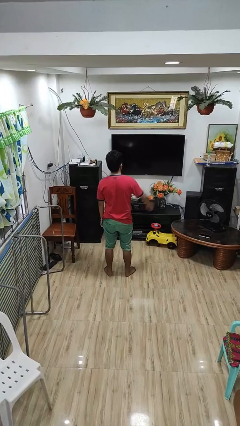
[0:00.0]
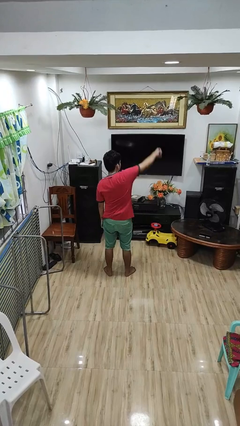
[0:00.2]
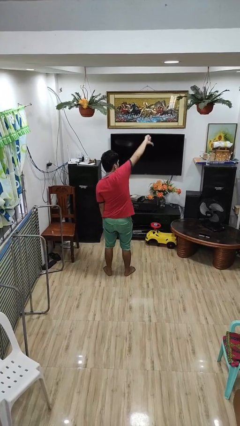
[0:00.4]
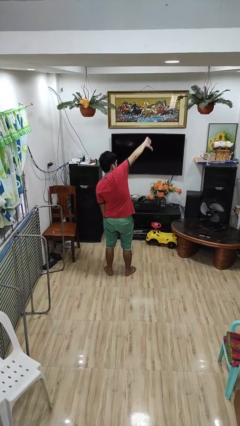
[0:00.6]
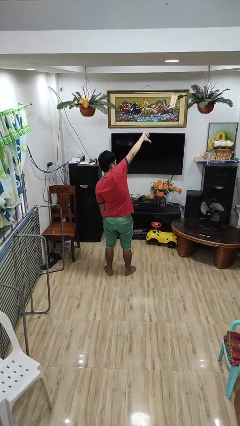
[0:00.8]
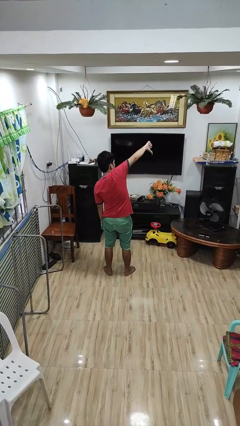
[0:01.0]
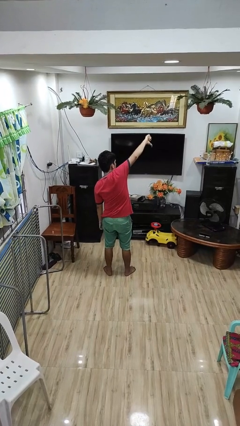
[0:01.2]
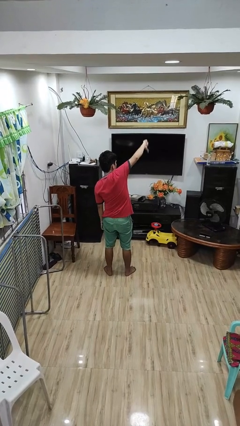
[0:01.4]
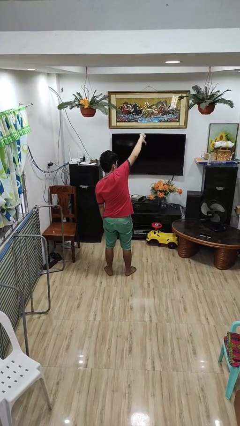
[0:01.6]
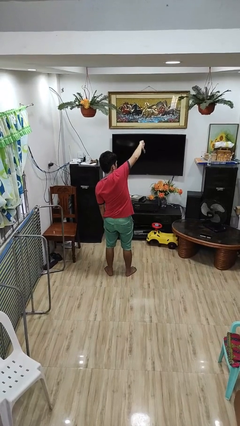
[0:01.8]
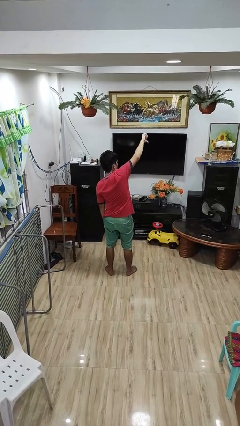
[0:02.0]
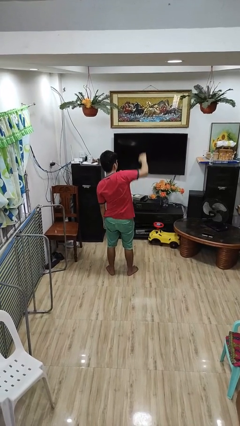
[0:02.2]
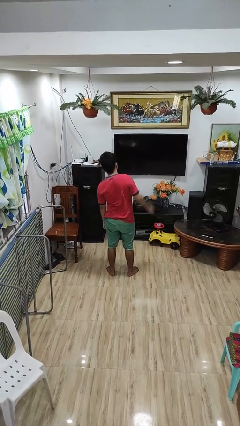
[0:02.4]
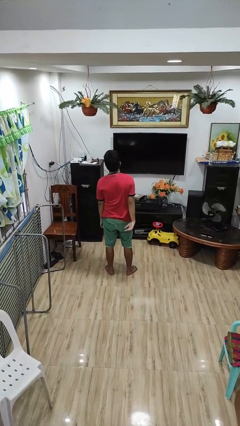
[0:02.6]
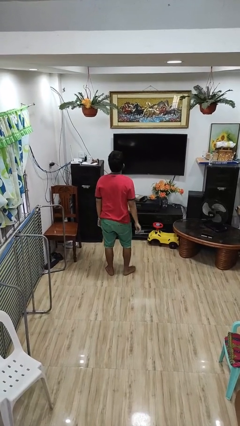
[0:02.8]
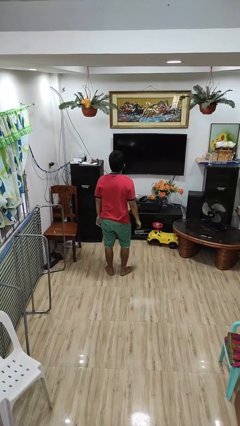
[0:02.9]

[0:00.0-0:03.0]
person gestures thumbs down

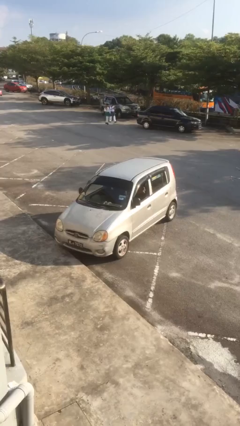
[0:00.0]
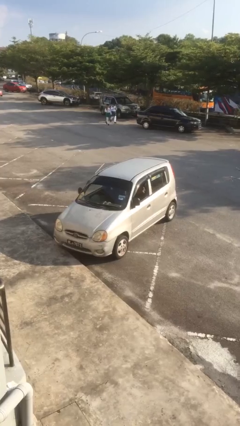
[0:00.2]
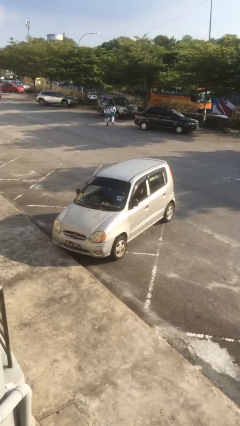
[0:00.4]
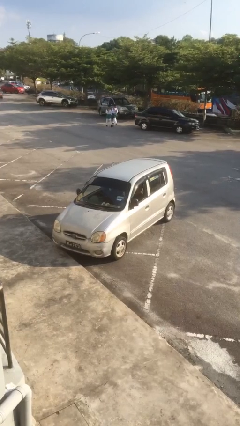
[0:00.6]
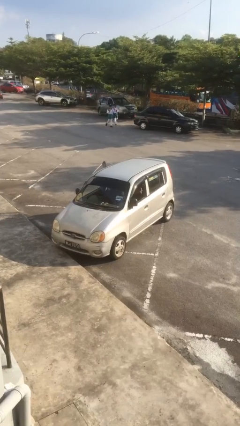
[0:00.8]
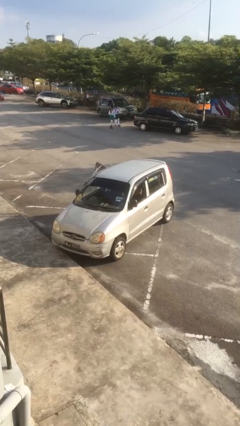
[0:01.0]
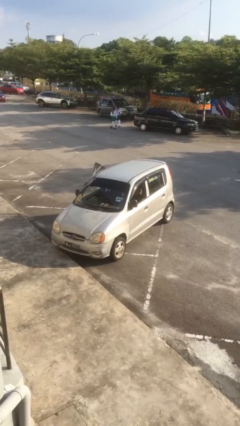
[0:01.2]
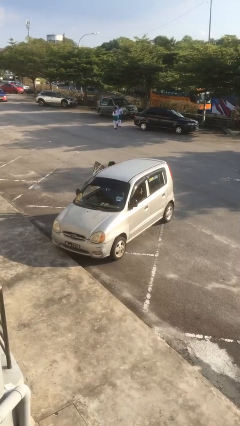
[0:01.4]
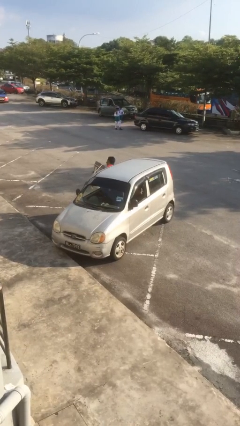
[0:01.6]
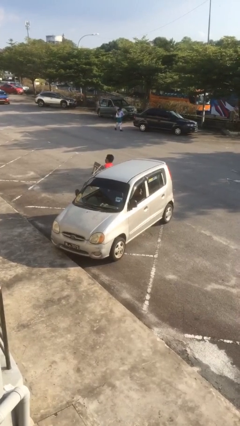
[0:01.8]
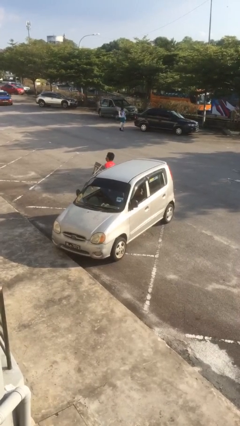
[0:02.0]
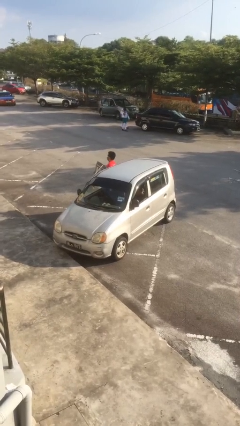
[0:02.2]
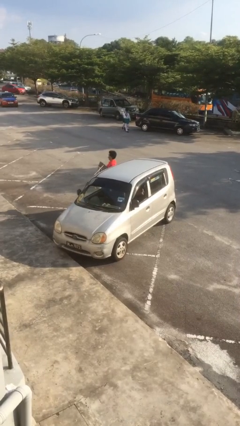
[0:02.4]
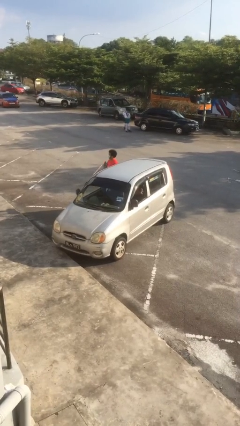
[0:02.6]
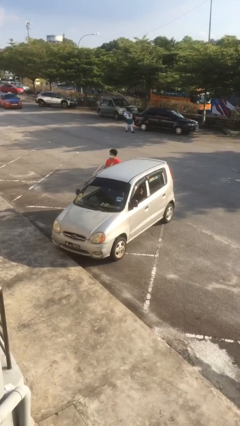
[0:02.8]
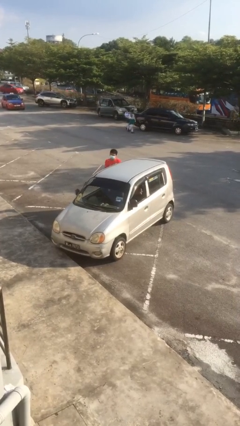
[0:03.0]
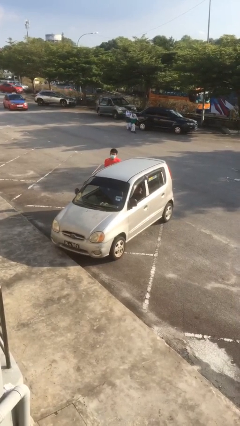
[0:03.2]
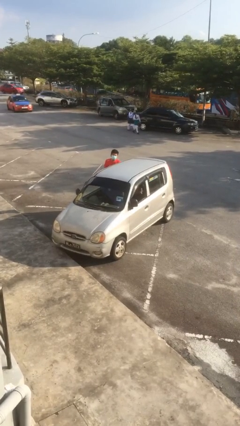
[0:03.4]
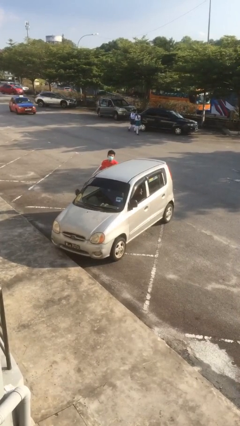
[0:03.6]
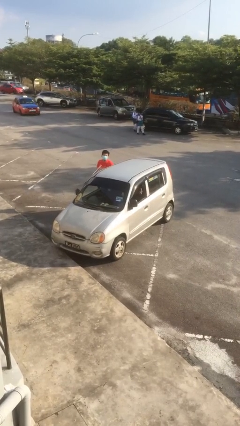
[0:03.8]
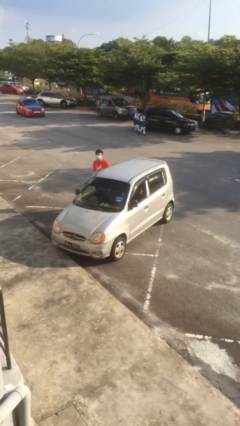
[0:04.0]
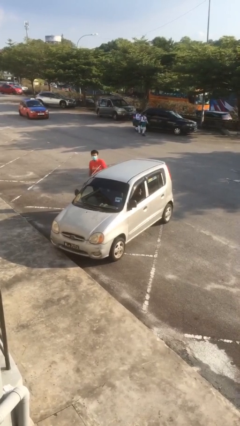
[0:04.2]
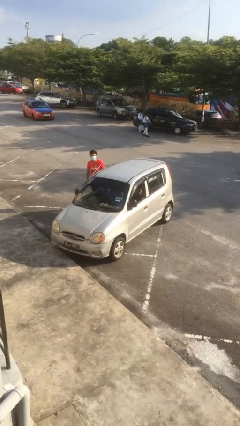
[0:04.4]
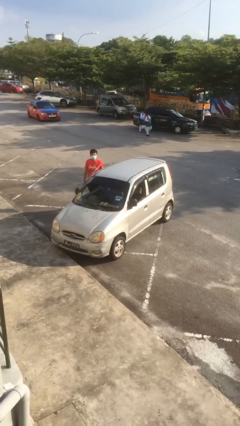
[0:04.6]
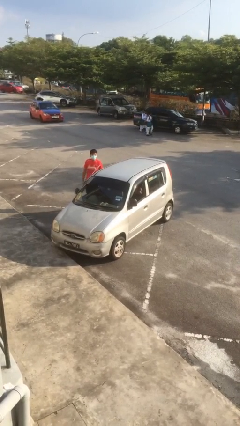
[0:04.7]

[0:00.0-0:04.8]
car drops off person

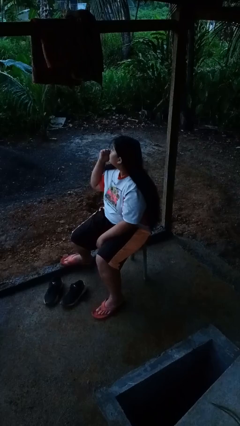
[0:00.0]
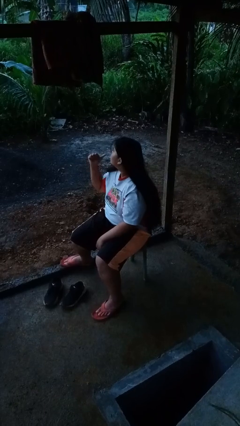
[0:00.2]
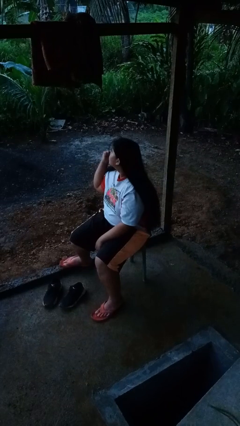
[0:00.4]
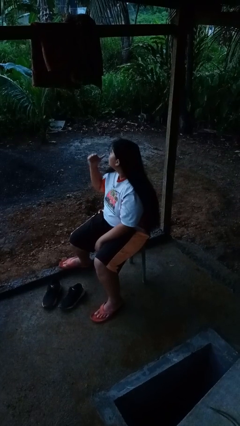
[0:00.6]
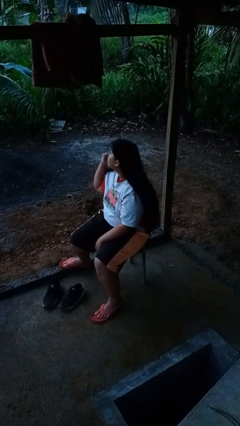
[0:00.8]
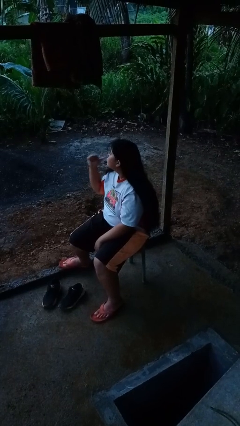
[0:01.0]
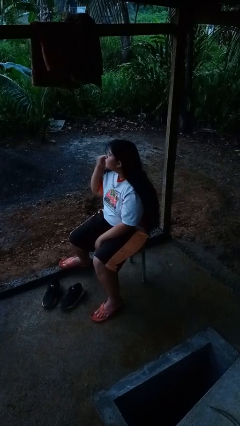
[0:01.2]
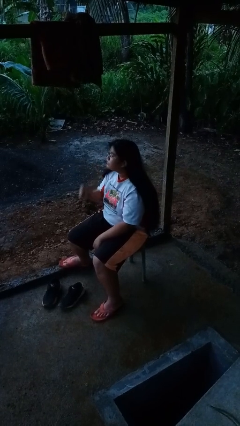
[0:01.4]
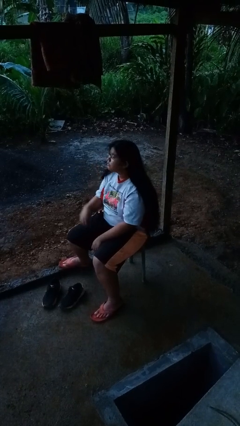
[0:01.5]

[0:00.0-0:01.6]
person gestures behind me

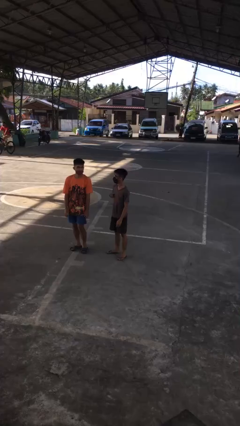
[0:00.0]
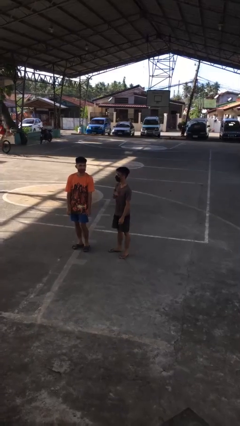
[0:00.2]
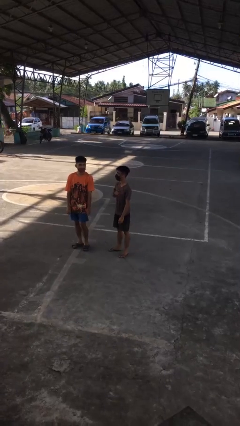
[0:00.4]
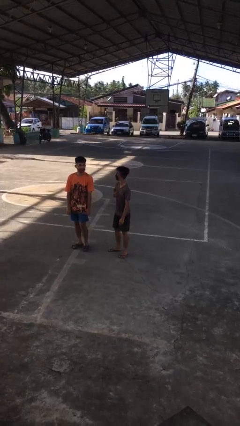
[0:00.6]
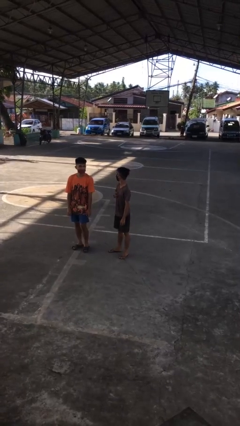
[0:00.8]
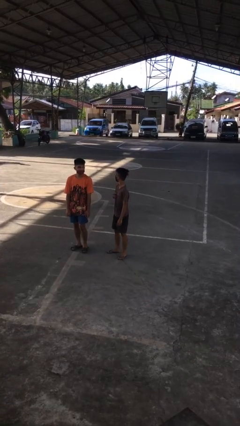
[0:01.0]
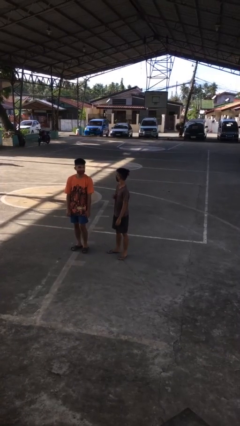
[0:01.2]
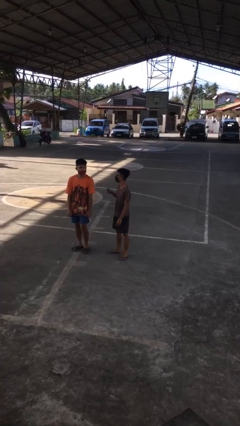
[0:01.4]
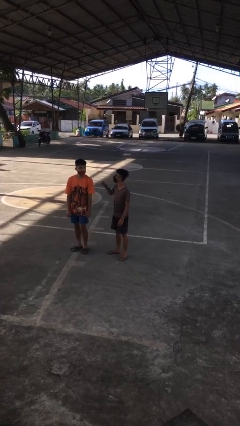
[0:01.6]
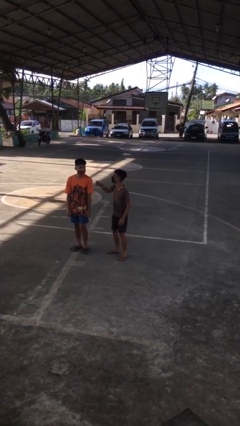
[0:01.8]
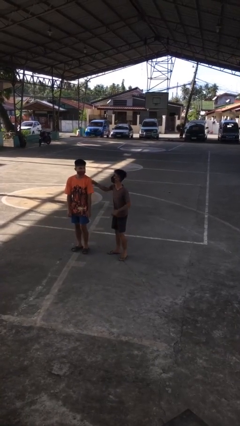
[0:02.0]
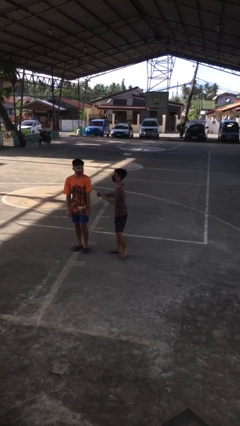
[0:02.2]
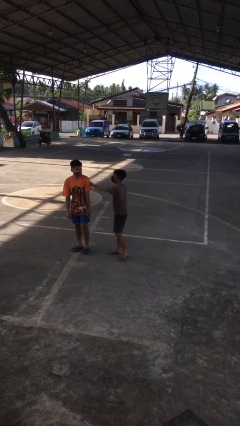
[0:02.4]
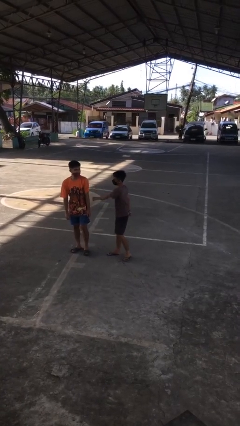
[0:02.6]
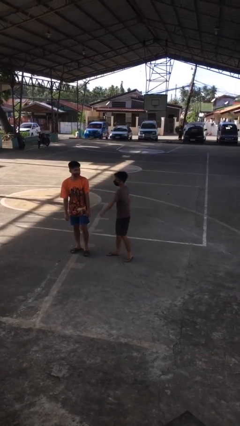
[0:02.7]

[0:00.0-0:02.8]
person pounds shoulders of person

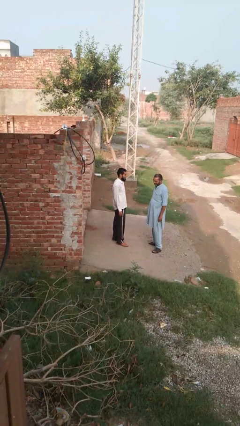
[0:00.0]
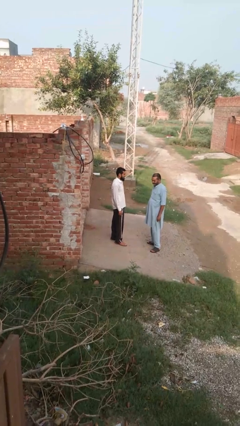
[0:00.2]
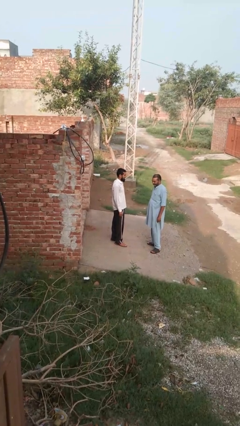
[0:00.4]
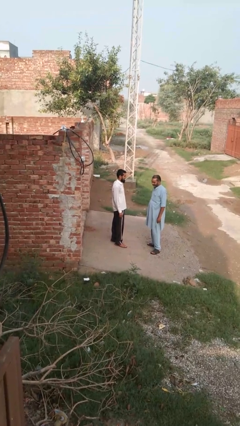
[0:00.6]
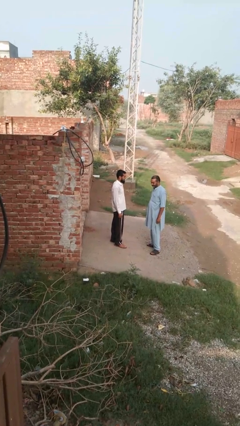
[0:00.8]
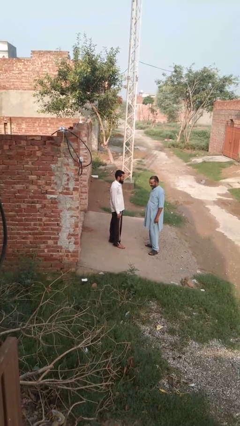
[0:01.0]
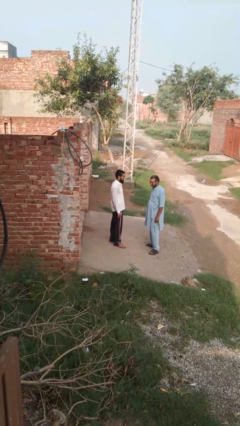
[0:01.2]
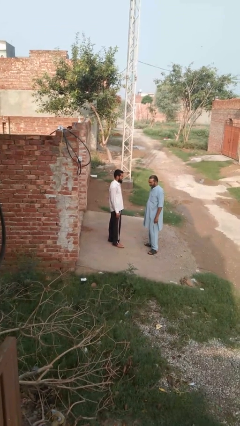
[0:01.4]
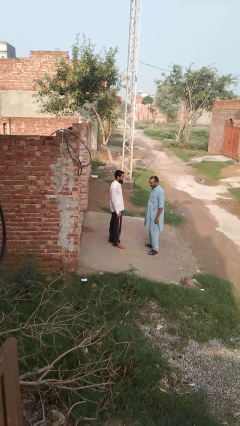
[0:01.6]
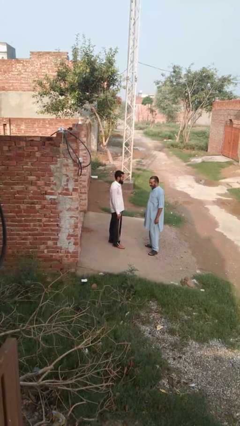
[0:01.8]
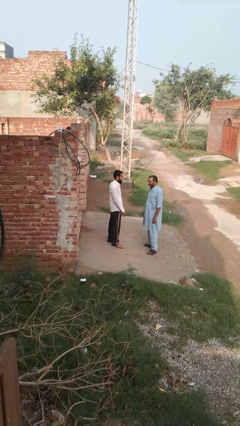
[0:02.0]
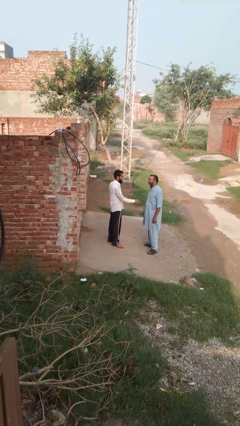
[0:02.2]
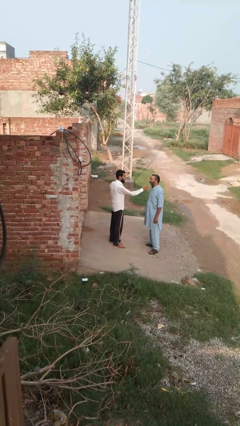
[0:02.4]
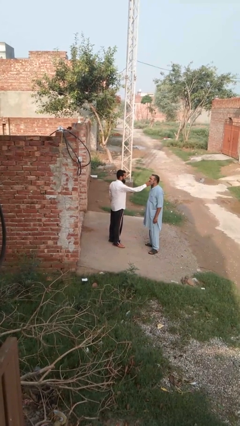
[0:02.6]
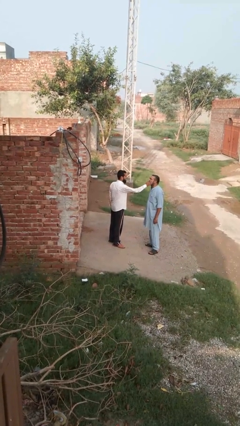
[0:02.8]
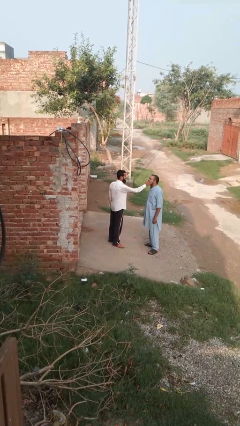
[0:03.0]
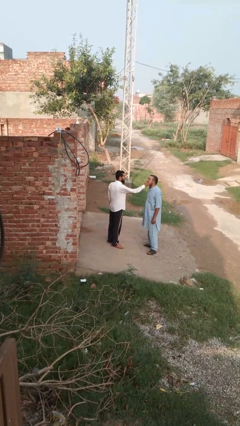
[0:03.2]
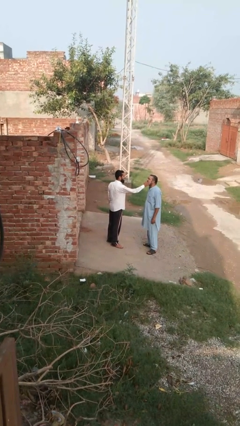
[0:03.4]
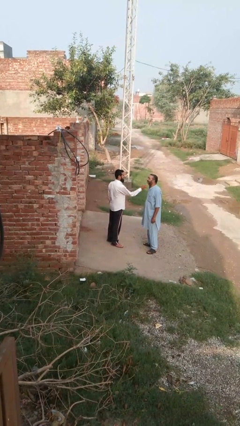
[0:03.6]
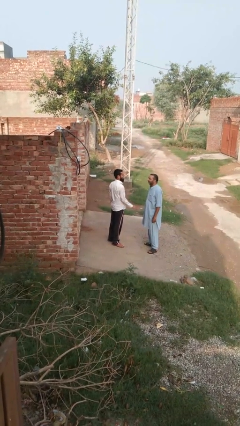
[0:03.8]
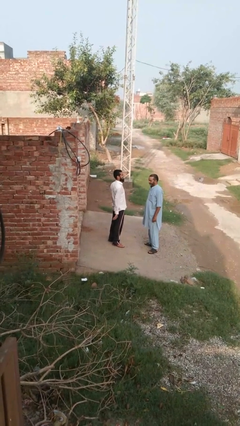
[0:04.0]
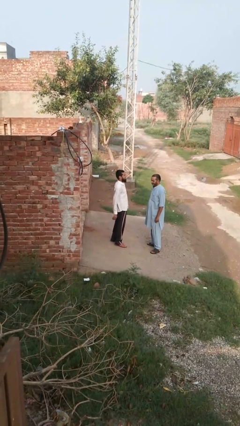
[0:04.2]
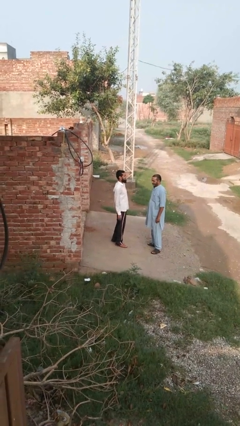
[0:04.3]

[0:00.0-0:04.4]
person touches face of person

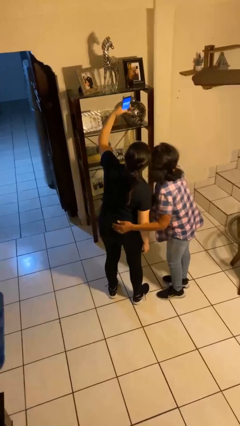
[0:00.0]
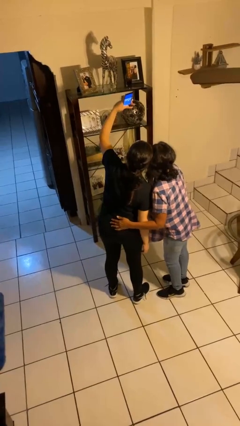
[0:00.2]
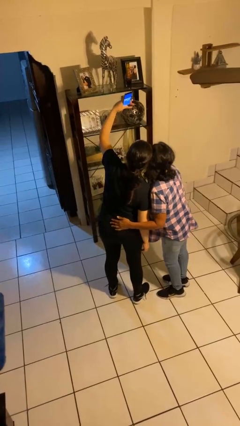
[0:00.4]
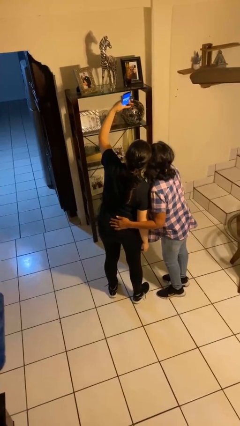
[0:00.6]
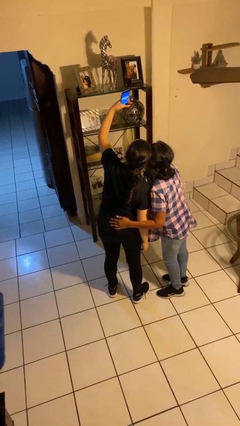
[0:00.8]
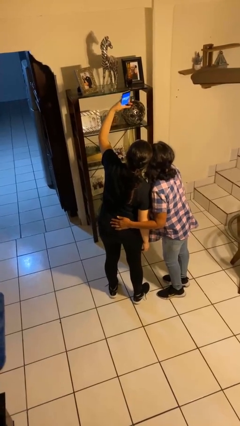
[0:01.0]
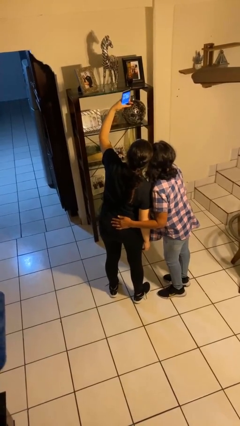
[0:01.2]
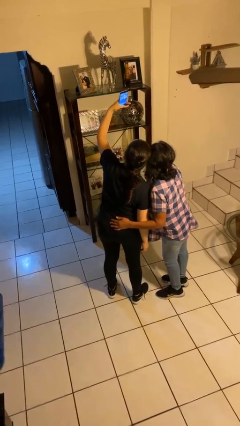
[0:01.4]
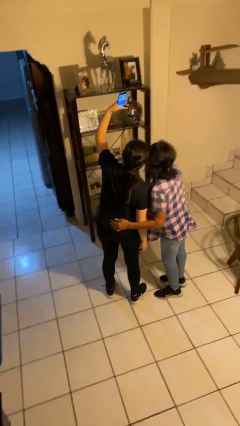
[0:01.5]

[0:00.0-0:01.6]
person takes selfie with person
